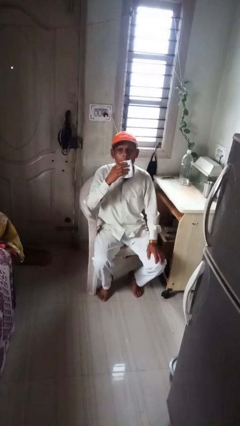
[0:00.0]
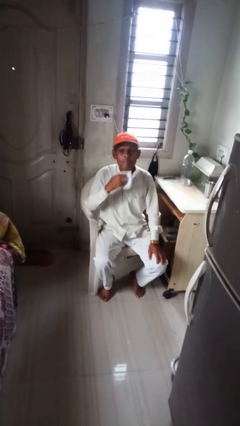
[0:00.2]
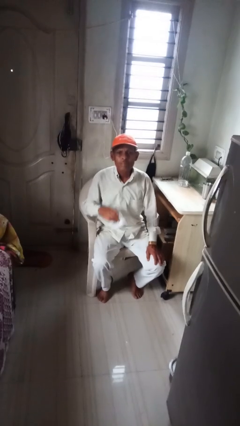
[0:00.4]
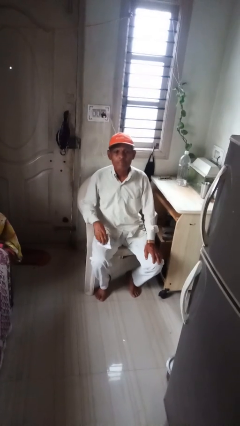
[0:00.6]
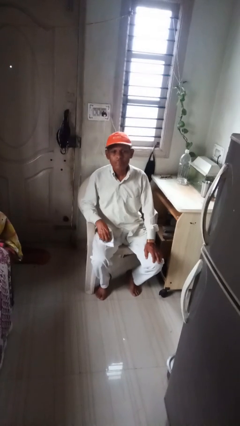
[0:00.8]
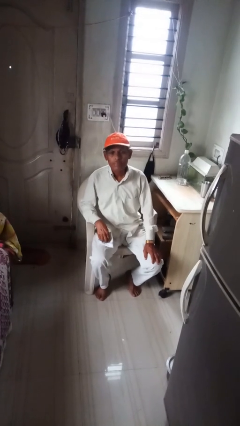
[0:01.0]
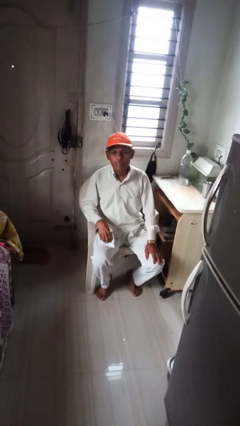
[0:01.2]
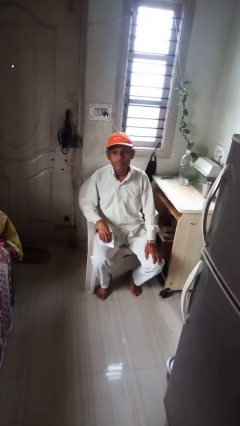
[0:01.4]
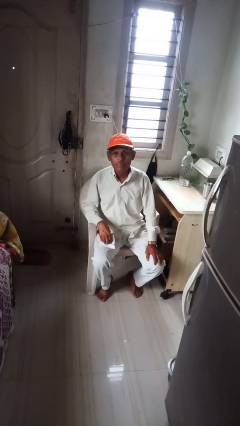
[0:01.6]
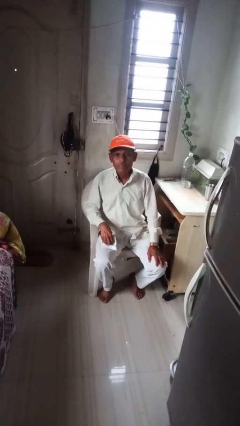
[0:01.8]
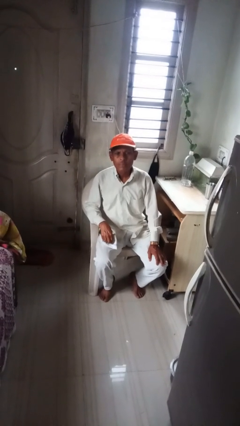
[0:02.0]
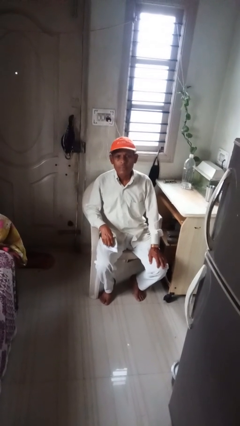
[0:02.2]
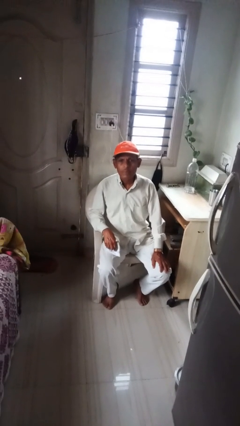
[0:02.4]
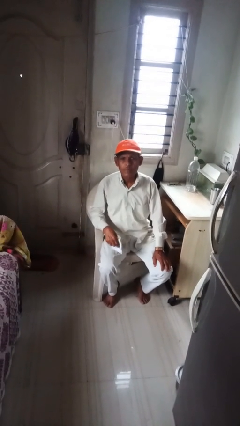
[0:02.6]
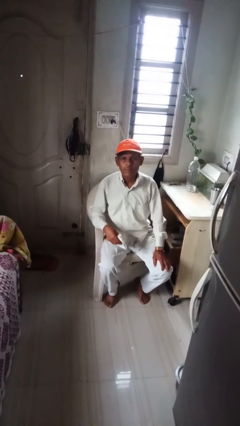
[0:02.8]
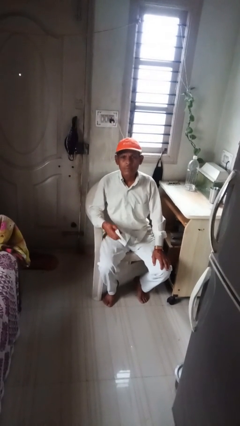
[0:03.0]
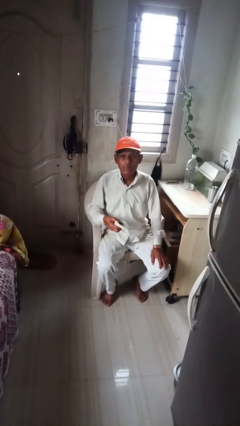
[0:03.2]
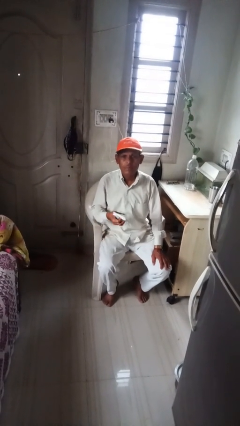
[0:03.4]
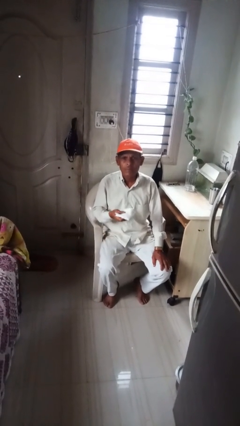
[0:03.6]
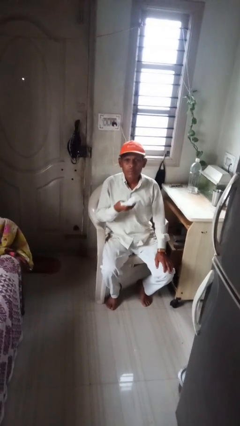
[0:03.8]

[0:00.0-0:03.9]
person wipes mouth with napkin

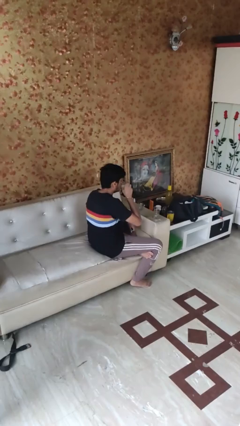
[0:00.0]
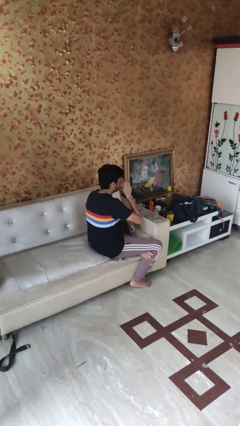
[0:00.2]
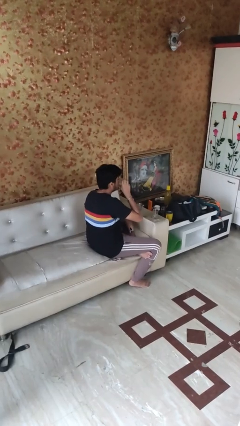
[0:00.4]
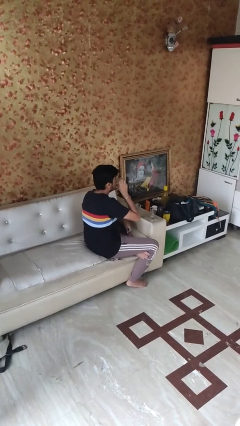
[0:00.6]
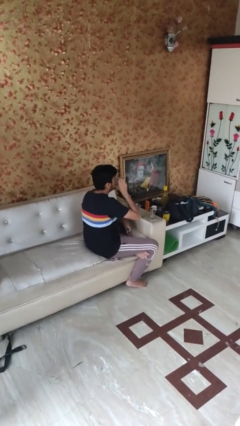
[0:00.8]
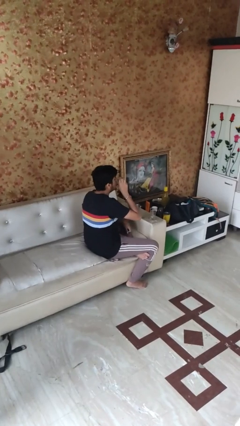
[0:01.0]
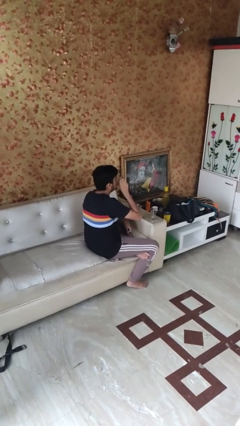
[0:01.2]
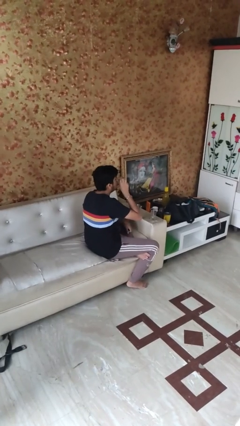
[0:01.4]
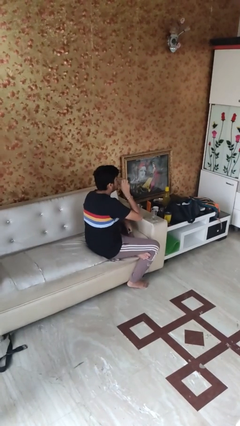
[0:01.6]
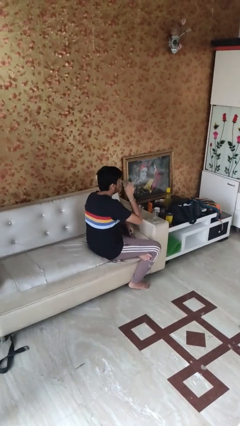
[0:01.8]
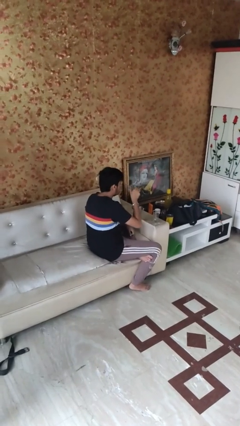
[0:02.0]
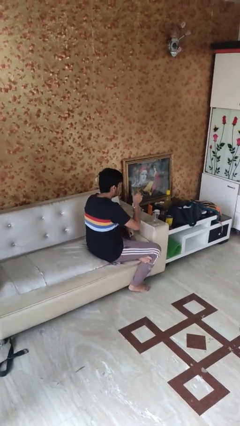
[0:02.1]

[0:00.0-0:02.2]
person drinks from shotglass

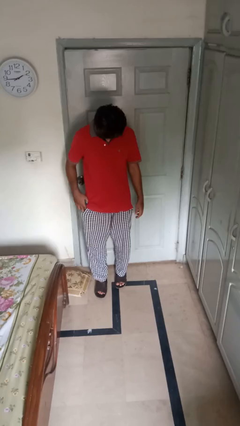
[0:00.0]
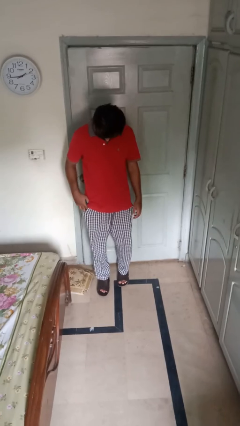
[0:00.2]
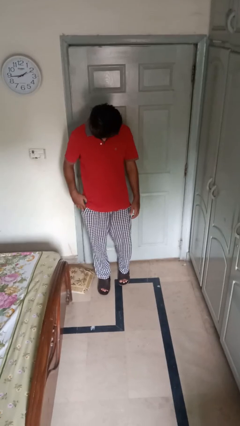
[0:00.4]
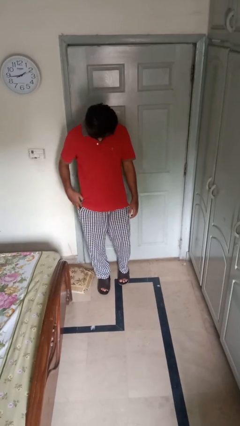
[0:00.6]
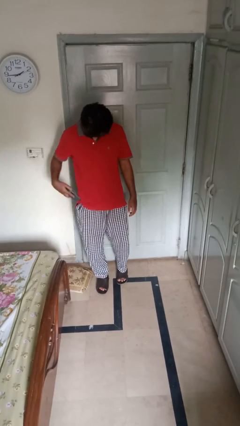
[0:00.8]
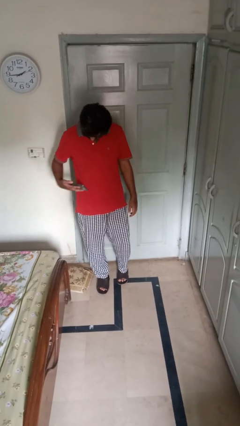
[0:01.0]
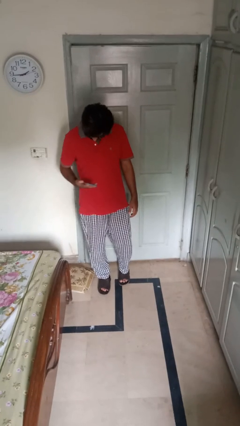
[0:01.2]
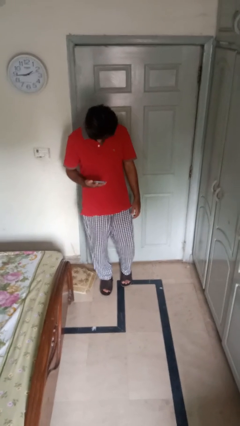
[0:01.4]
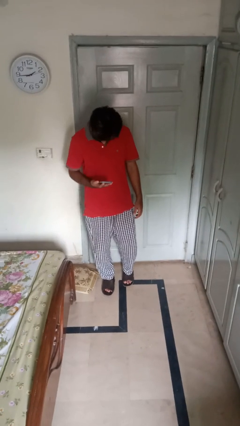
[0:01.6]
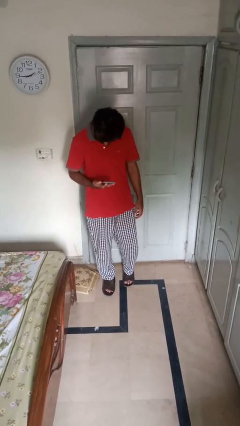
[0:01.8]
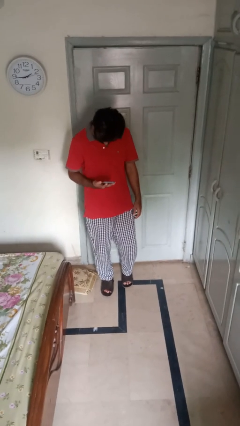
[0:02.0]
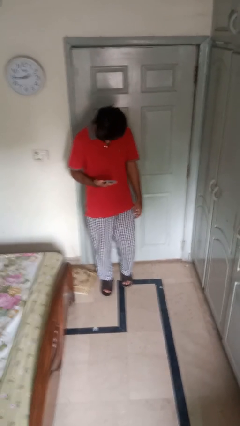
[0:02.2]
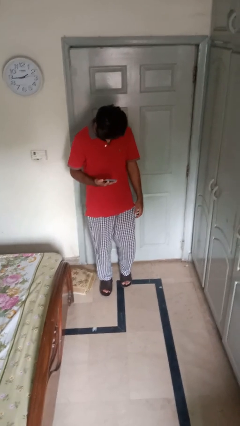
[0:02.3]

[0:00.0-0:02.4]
person takes phone from pocket

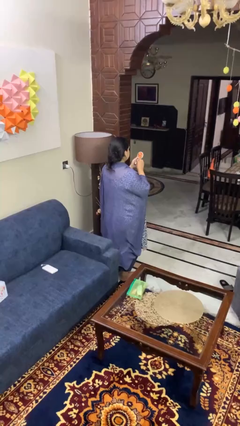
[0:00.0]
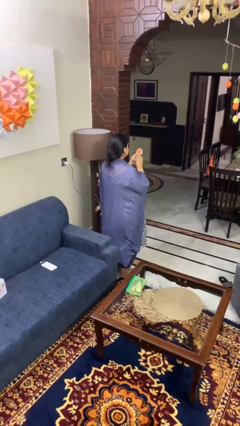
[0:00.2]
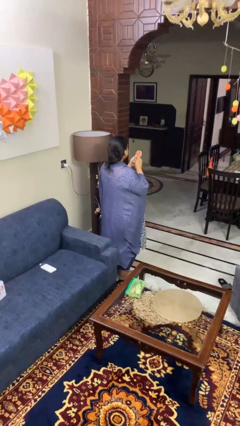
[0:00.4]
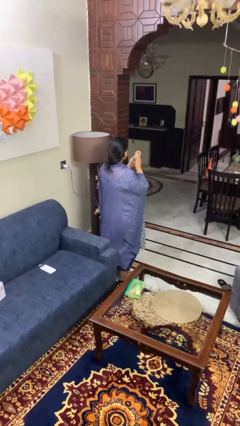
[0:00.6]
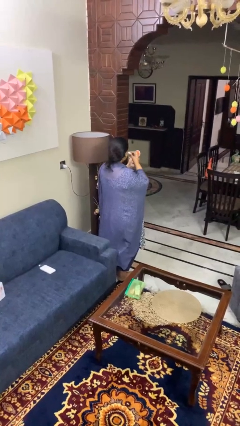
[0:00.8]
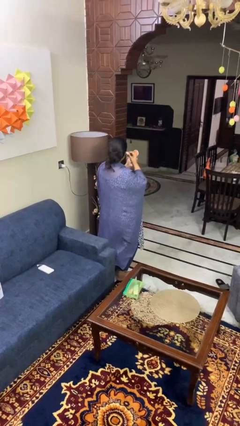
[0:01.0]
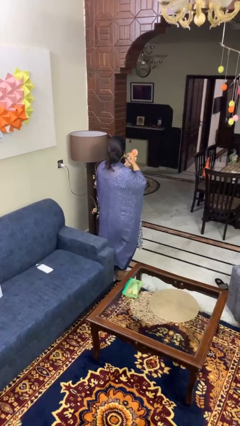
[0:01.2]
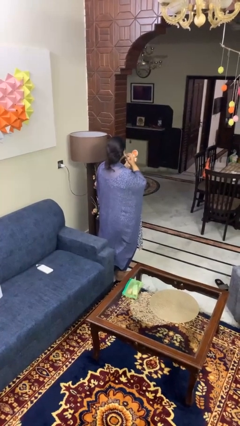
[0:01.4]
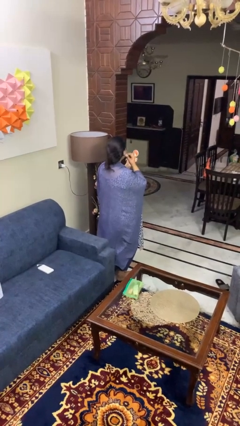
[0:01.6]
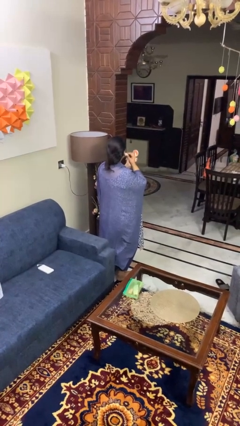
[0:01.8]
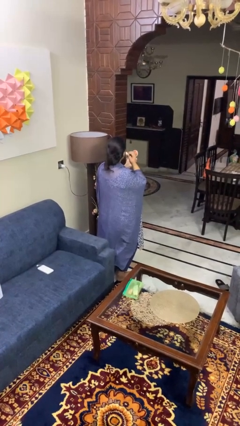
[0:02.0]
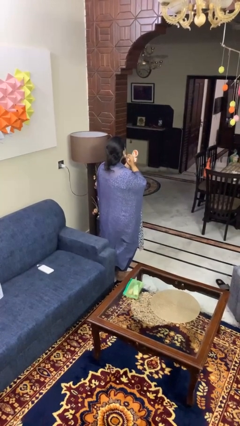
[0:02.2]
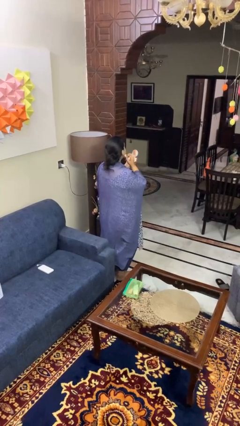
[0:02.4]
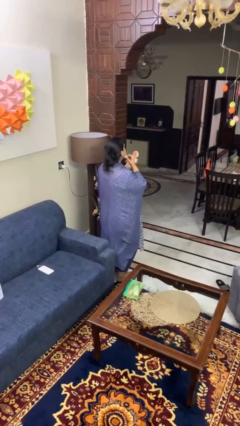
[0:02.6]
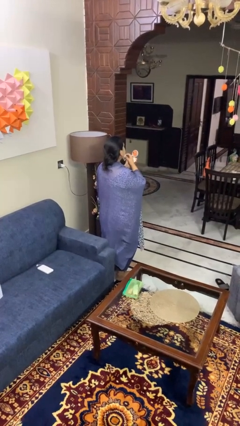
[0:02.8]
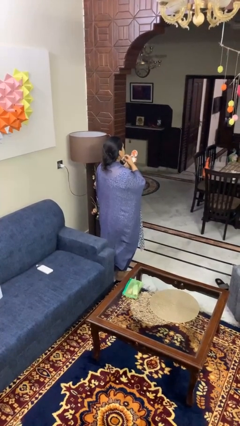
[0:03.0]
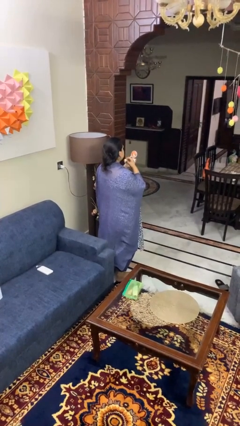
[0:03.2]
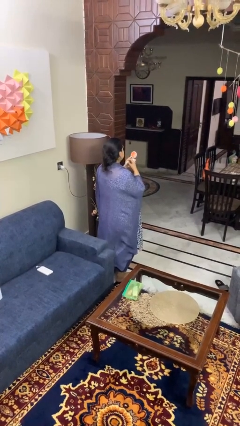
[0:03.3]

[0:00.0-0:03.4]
person applies foundation makeup

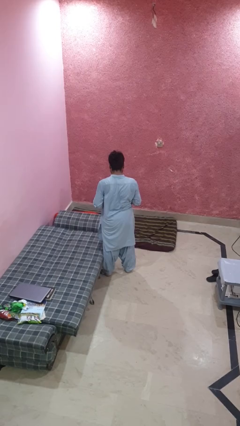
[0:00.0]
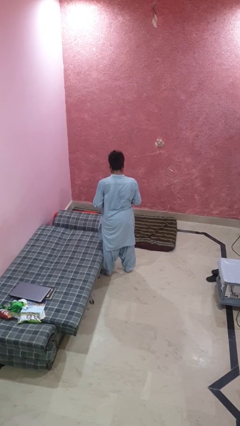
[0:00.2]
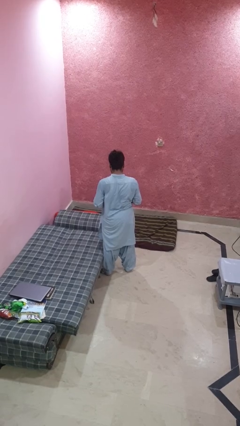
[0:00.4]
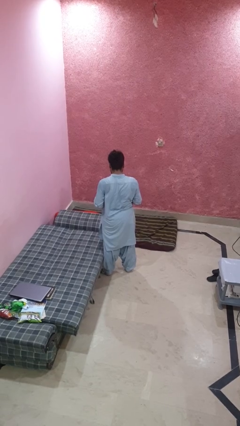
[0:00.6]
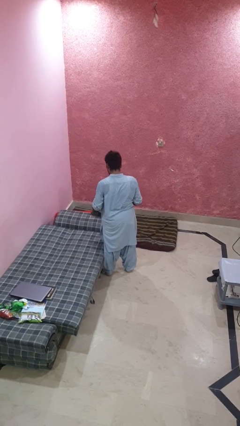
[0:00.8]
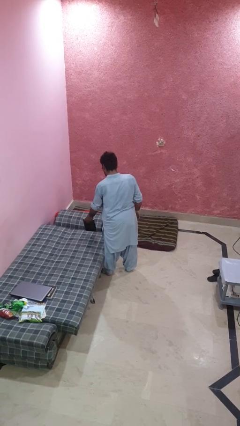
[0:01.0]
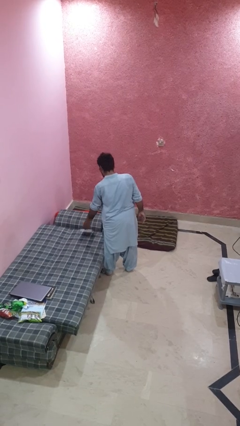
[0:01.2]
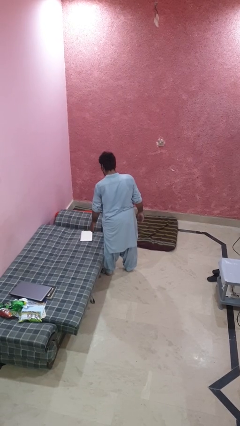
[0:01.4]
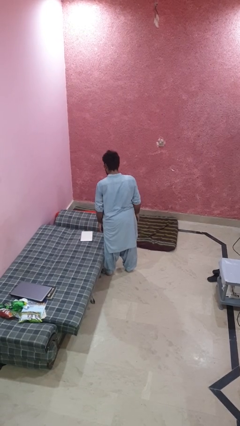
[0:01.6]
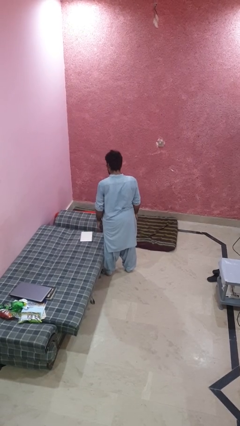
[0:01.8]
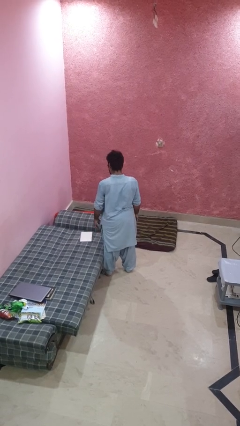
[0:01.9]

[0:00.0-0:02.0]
person puts down object on bed

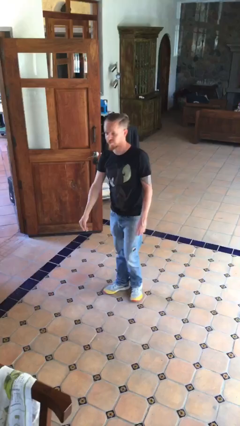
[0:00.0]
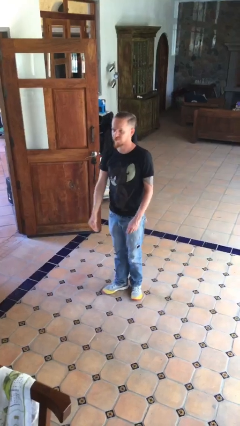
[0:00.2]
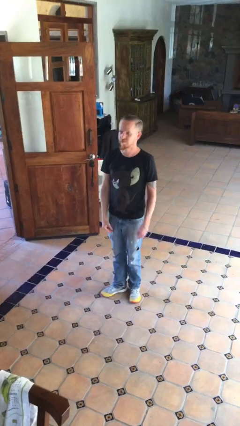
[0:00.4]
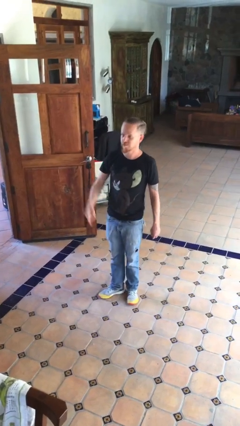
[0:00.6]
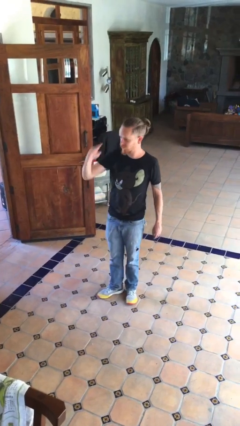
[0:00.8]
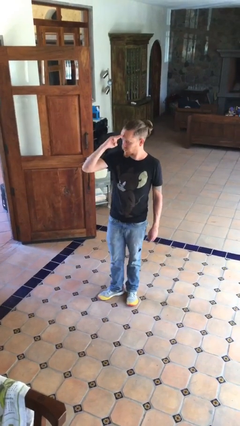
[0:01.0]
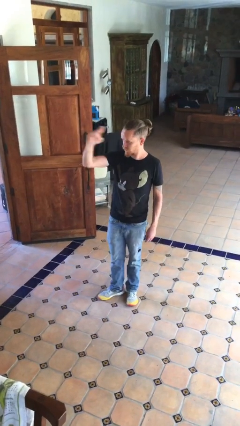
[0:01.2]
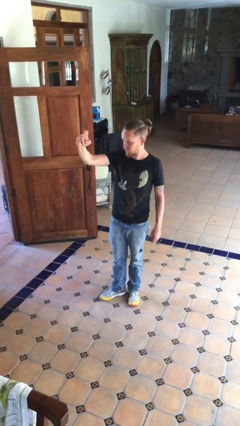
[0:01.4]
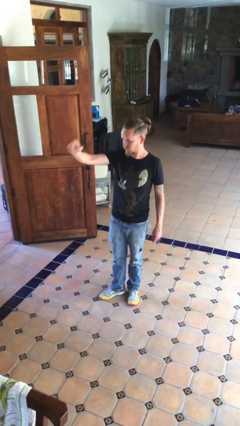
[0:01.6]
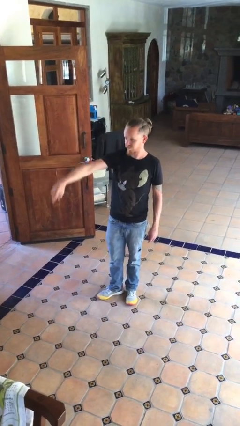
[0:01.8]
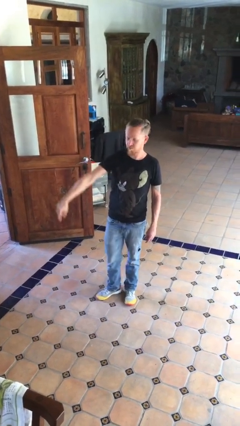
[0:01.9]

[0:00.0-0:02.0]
person salutes

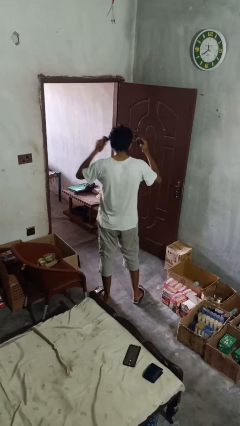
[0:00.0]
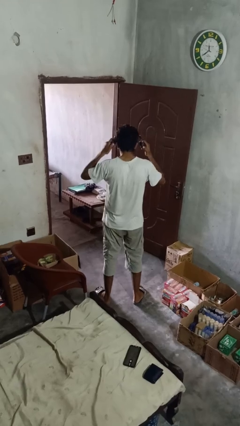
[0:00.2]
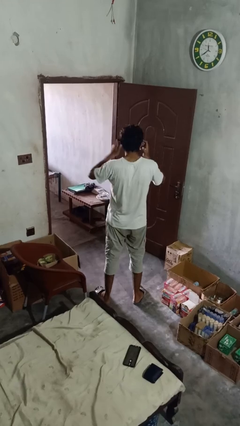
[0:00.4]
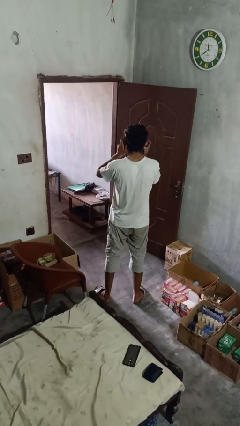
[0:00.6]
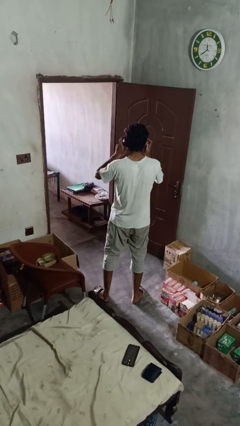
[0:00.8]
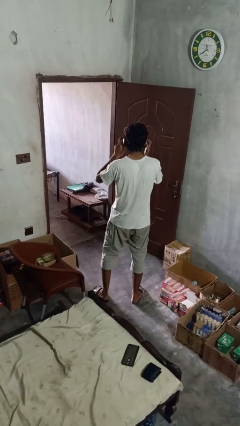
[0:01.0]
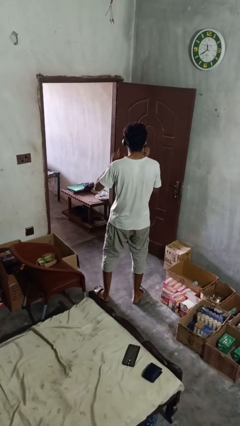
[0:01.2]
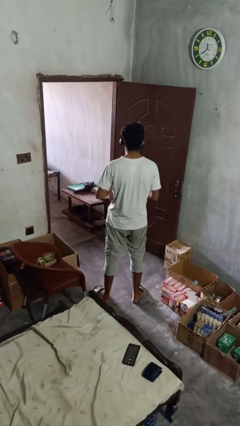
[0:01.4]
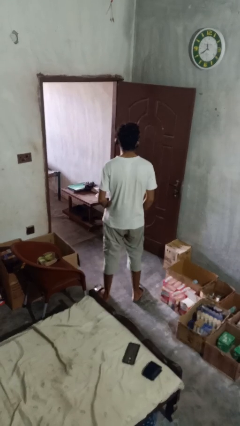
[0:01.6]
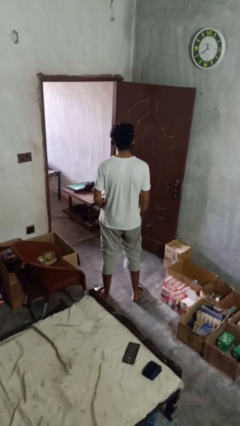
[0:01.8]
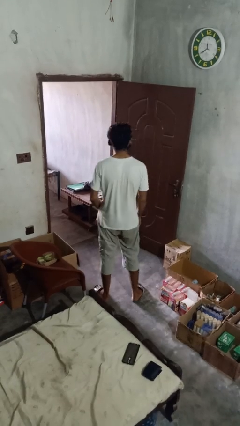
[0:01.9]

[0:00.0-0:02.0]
person puts on headphones
